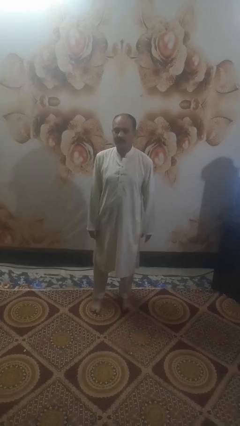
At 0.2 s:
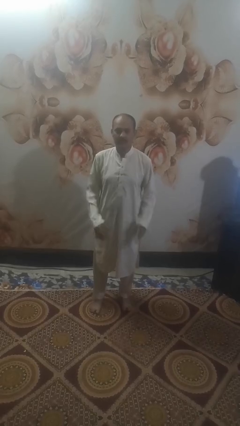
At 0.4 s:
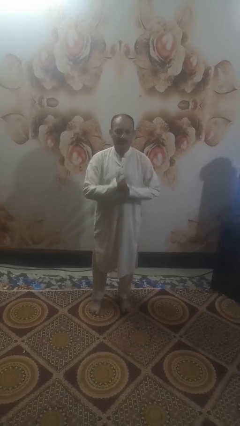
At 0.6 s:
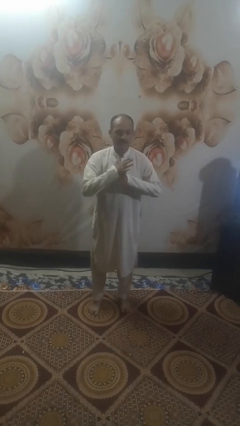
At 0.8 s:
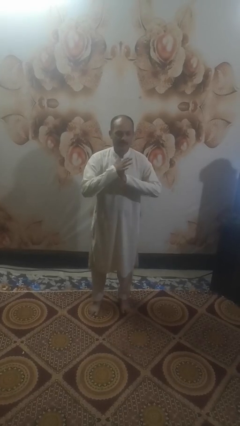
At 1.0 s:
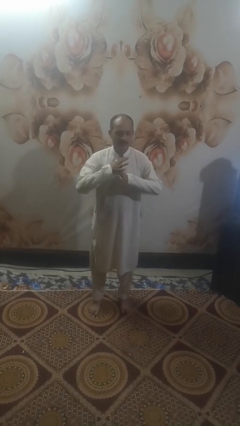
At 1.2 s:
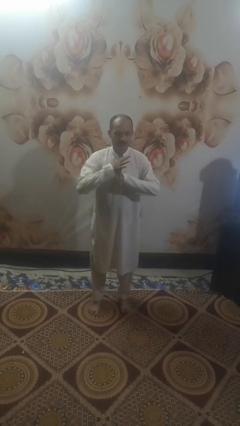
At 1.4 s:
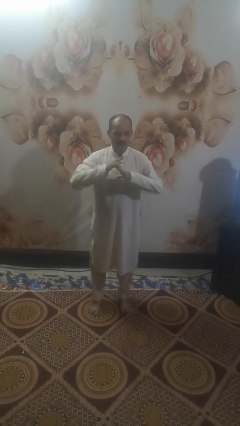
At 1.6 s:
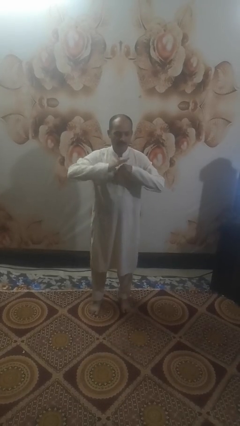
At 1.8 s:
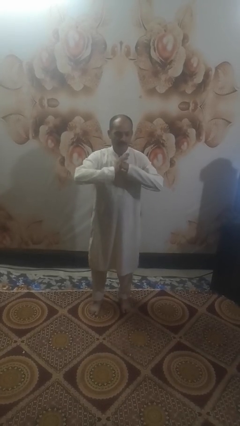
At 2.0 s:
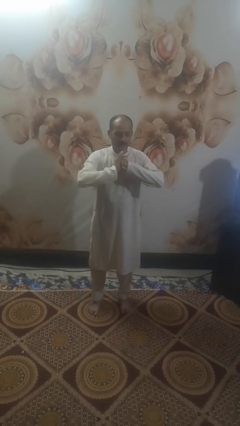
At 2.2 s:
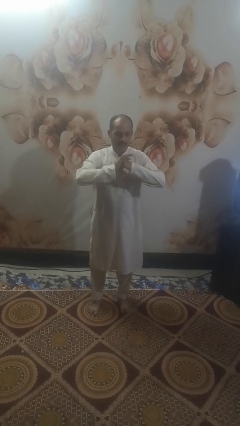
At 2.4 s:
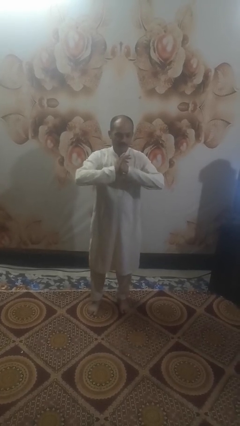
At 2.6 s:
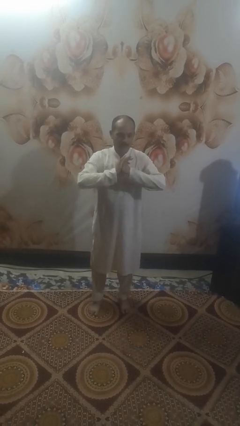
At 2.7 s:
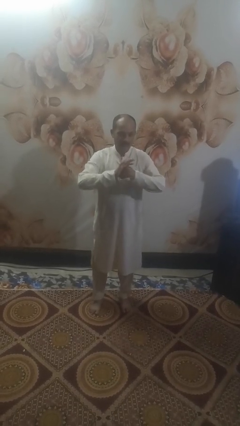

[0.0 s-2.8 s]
person cracks knuckles

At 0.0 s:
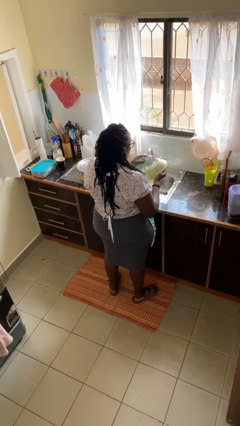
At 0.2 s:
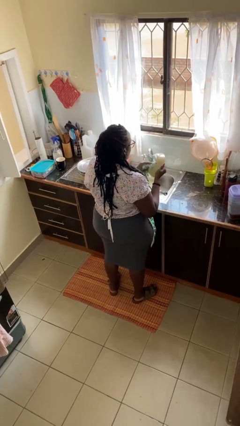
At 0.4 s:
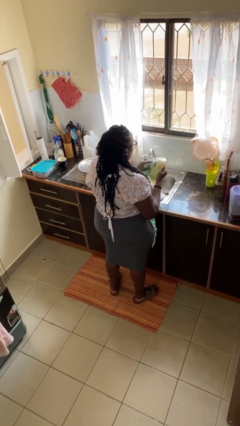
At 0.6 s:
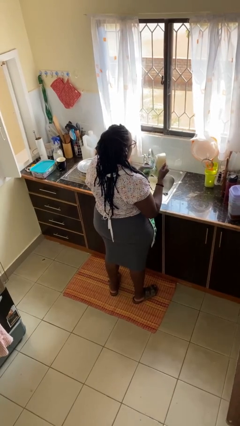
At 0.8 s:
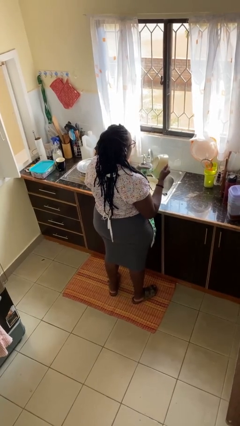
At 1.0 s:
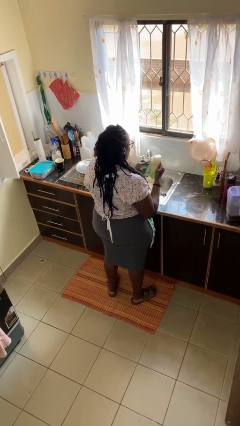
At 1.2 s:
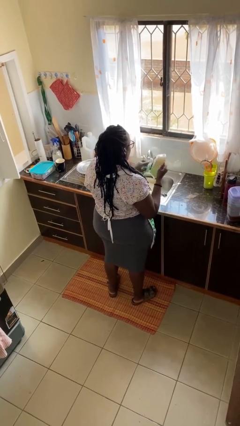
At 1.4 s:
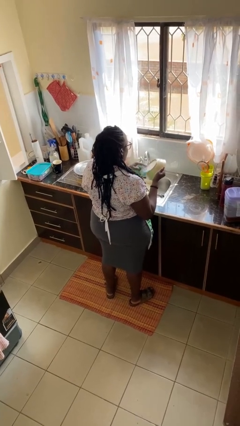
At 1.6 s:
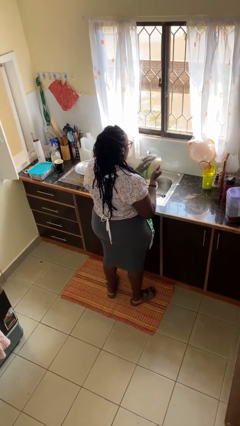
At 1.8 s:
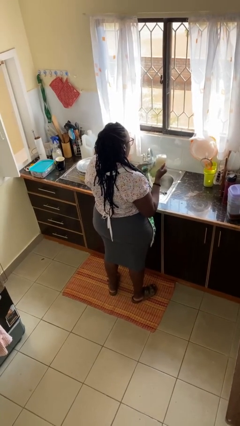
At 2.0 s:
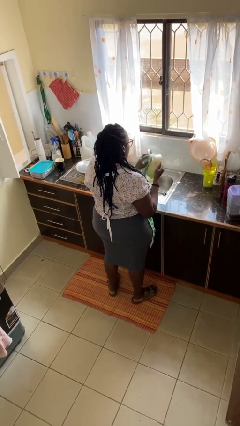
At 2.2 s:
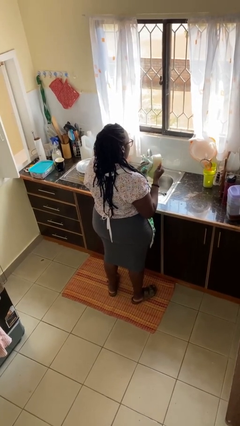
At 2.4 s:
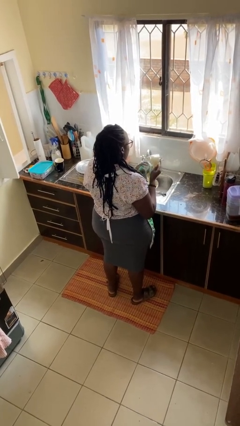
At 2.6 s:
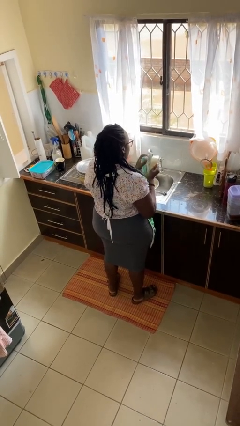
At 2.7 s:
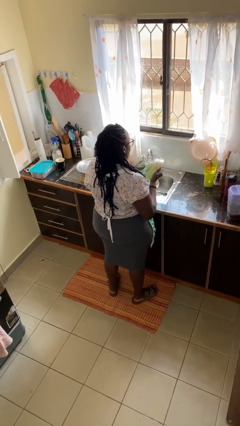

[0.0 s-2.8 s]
person dries dish

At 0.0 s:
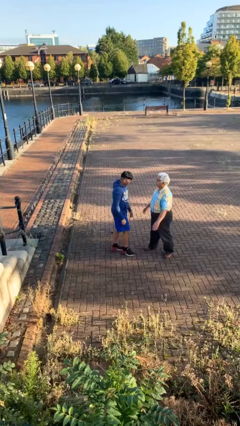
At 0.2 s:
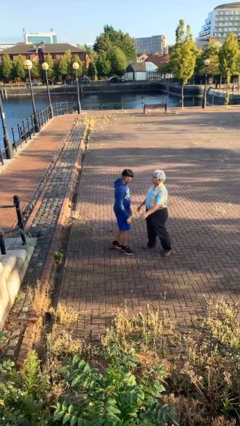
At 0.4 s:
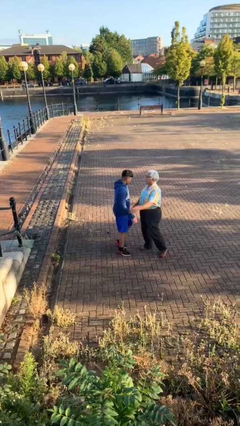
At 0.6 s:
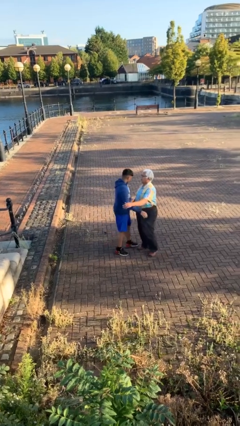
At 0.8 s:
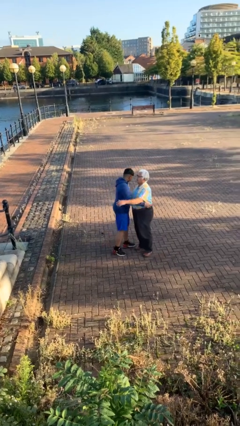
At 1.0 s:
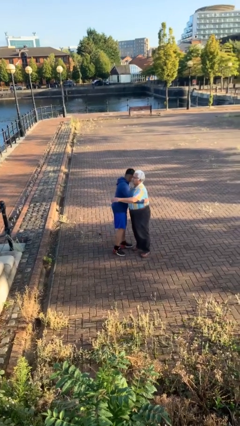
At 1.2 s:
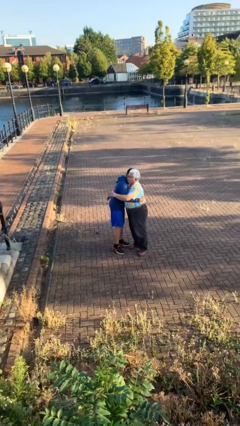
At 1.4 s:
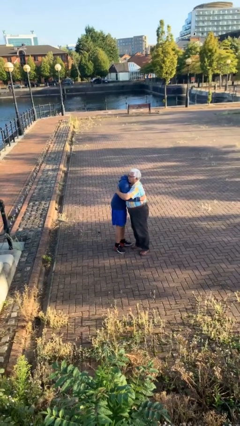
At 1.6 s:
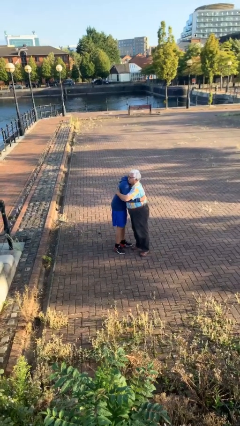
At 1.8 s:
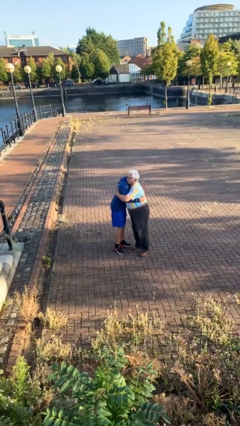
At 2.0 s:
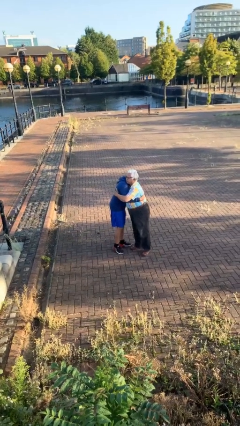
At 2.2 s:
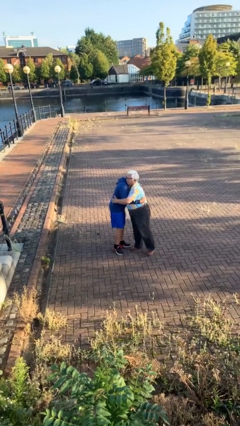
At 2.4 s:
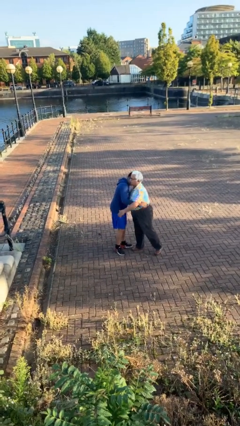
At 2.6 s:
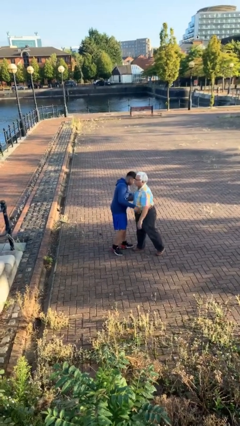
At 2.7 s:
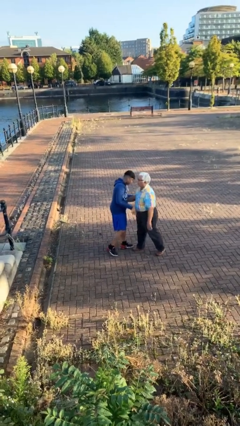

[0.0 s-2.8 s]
person embraces person

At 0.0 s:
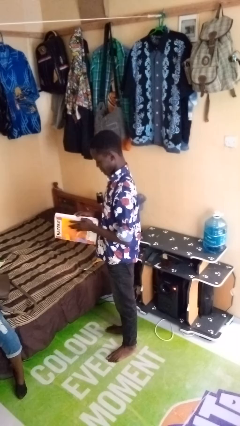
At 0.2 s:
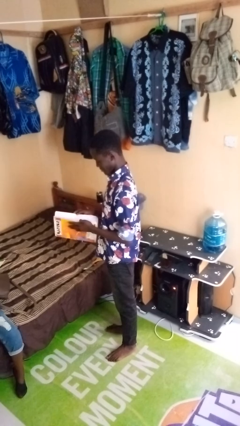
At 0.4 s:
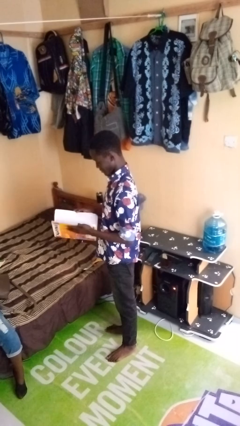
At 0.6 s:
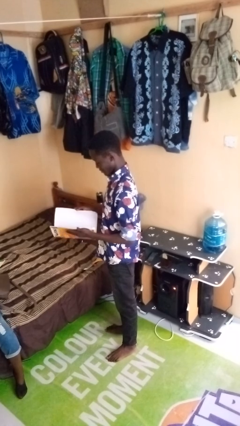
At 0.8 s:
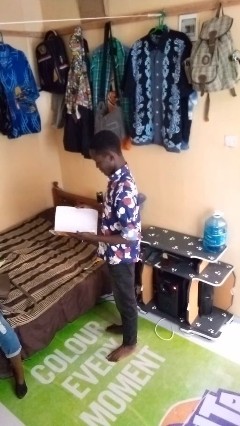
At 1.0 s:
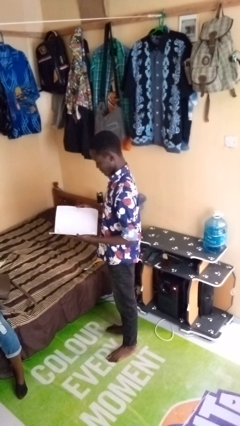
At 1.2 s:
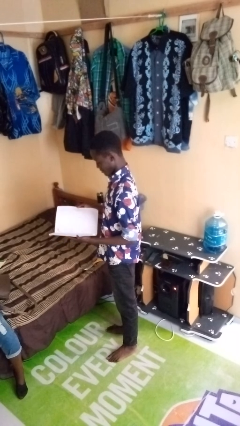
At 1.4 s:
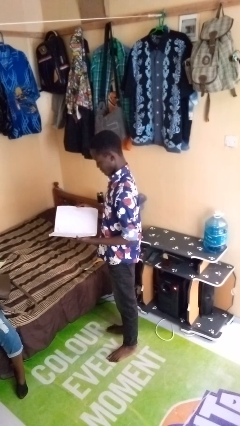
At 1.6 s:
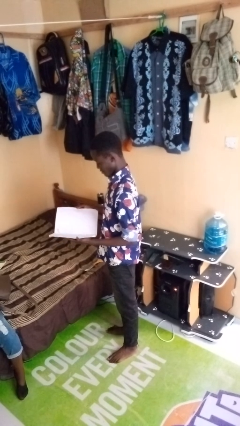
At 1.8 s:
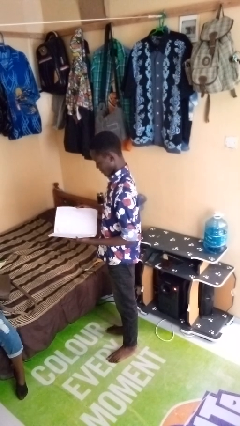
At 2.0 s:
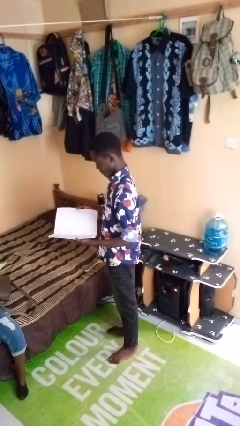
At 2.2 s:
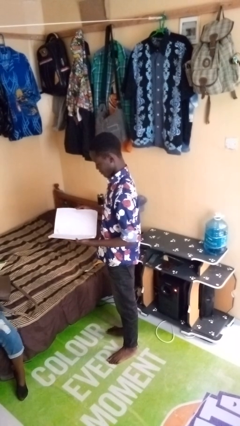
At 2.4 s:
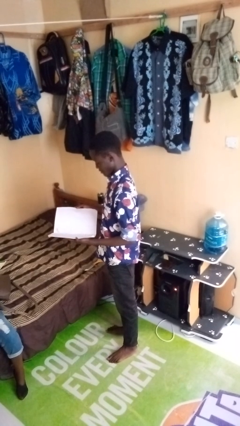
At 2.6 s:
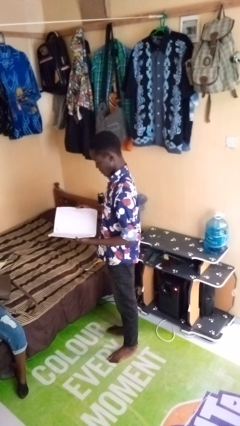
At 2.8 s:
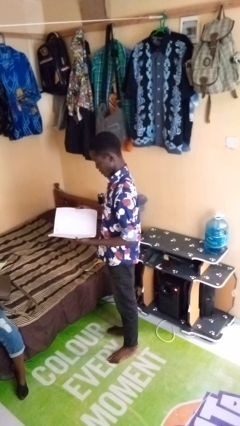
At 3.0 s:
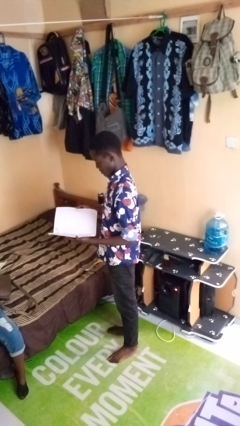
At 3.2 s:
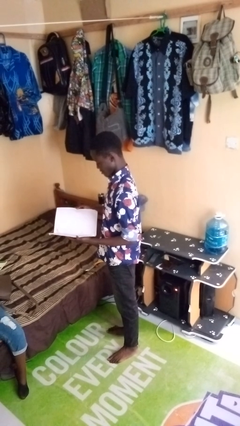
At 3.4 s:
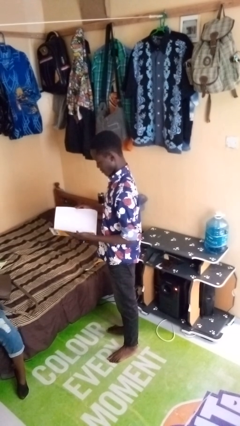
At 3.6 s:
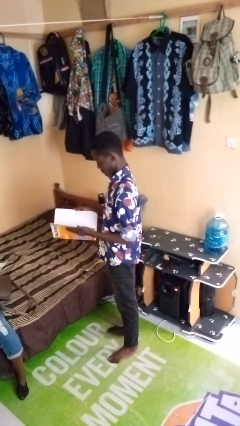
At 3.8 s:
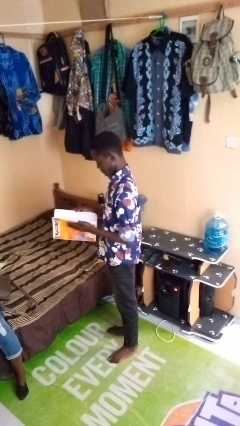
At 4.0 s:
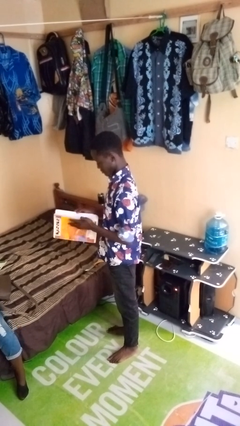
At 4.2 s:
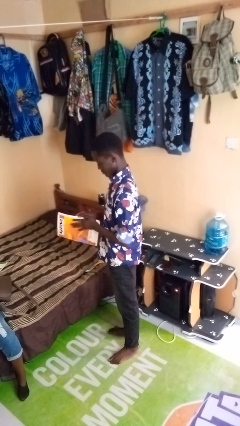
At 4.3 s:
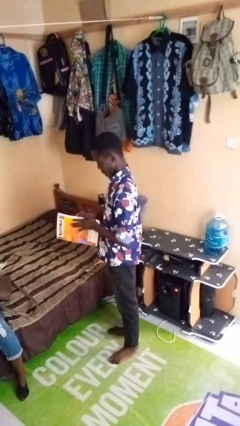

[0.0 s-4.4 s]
person reads book

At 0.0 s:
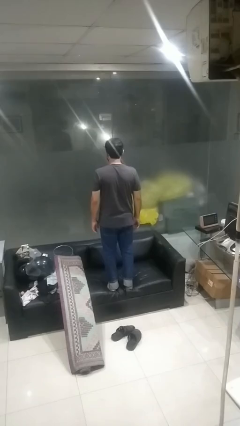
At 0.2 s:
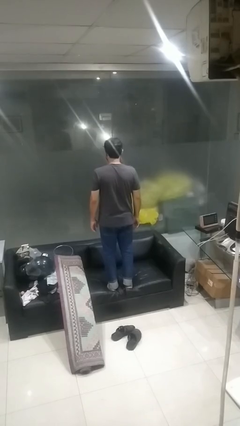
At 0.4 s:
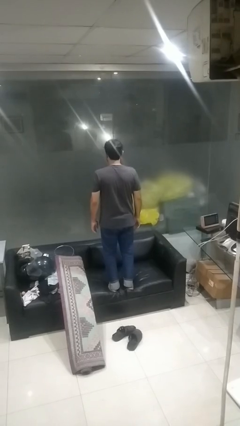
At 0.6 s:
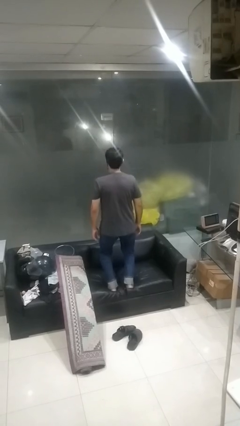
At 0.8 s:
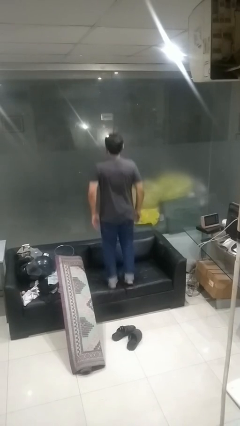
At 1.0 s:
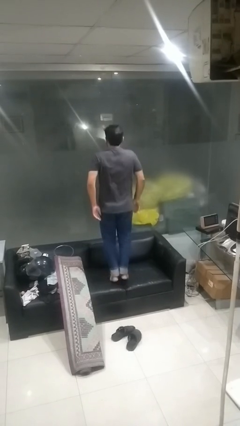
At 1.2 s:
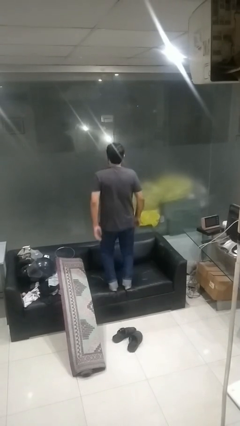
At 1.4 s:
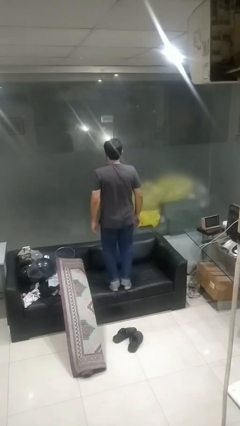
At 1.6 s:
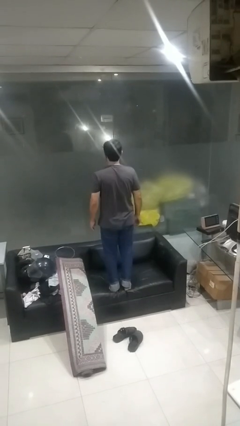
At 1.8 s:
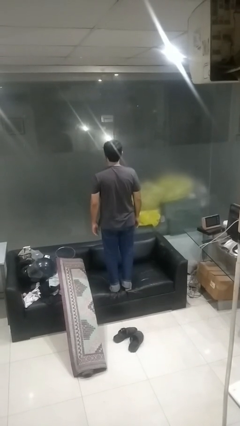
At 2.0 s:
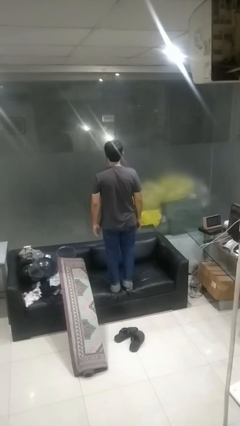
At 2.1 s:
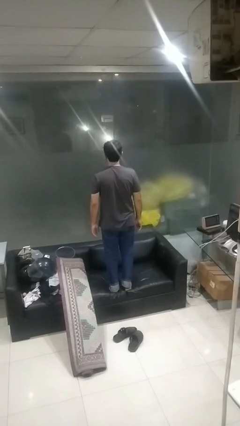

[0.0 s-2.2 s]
person jumps on couch

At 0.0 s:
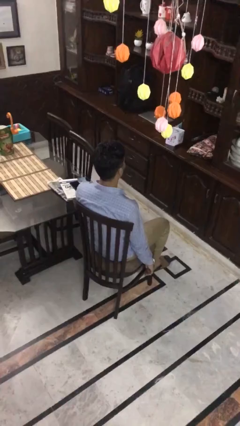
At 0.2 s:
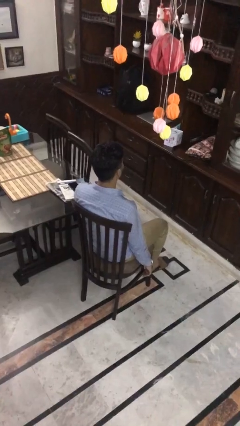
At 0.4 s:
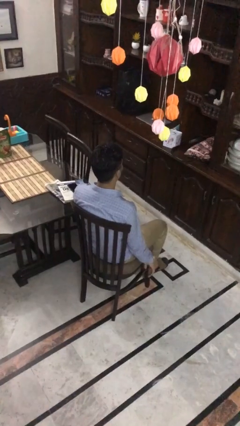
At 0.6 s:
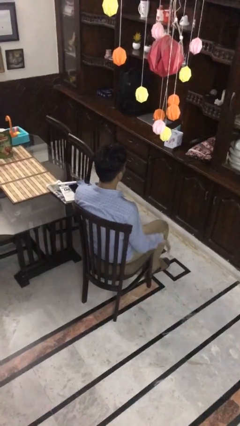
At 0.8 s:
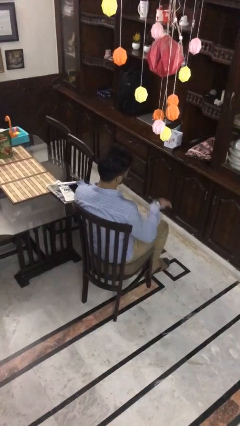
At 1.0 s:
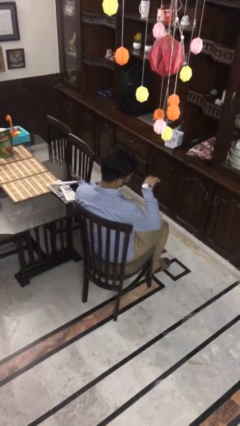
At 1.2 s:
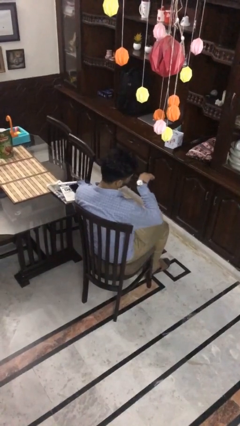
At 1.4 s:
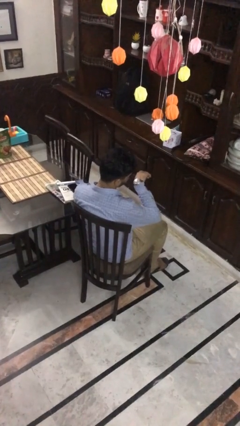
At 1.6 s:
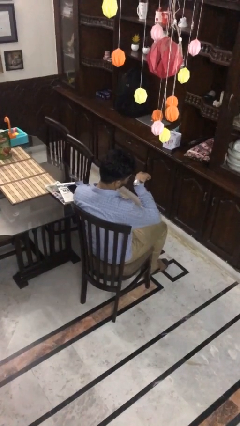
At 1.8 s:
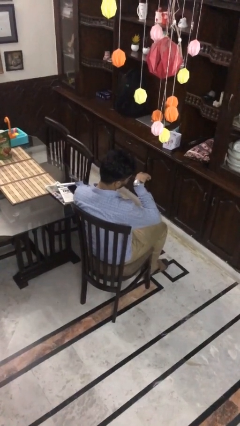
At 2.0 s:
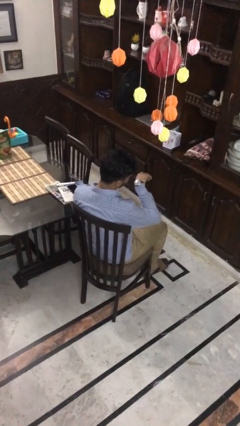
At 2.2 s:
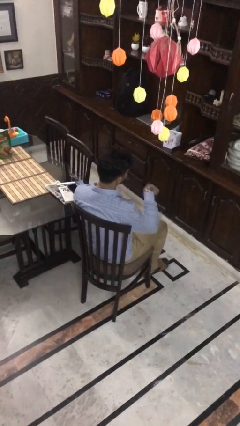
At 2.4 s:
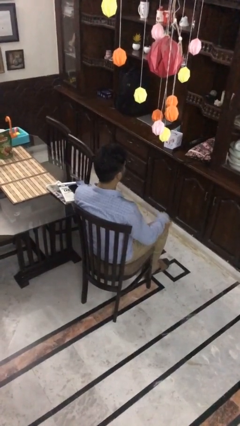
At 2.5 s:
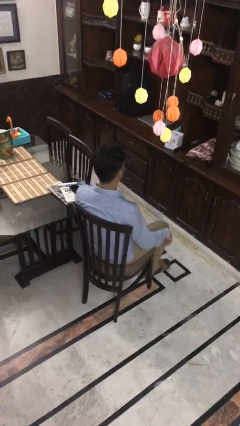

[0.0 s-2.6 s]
person looks at wristwatch
